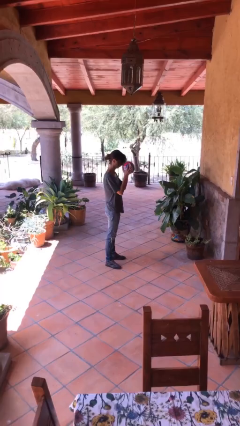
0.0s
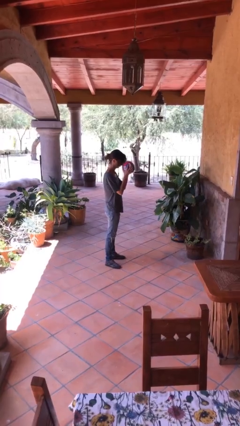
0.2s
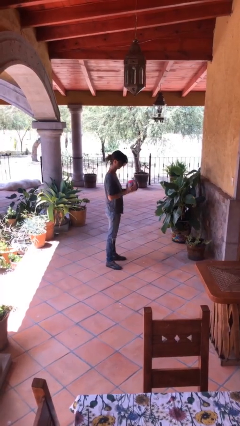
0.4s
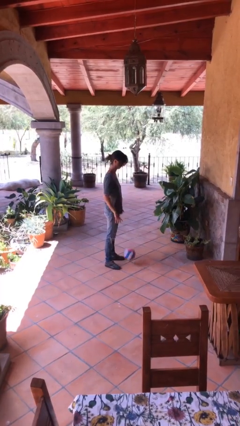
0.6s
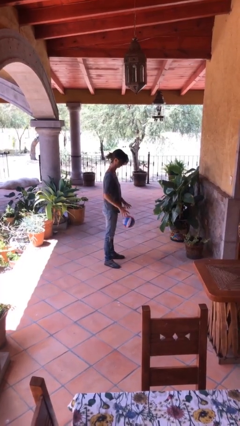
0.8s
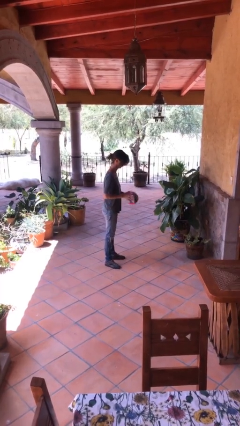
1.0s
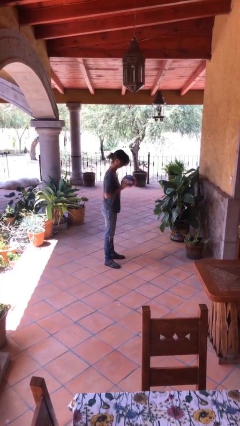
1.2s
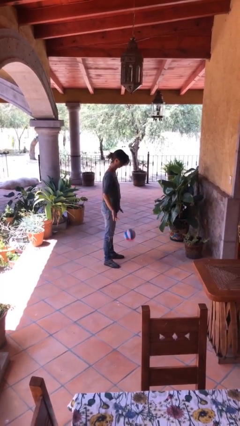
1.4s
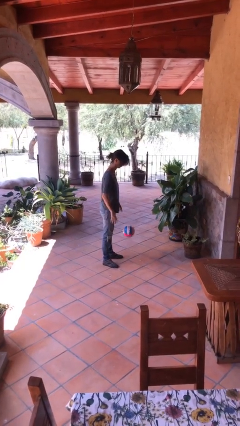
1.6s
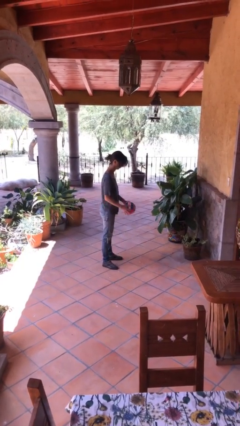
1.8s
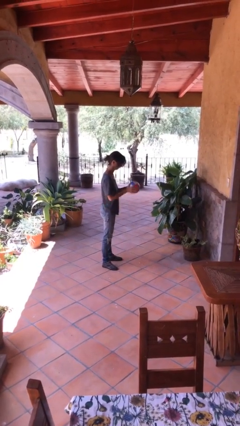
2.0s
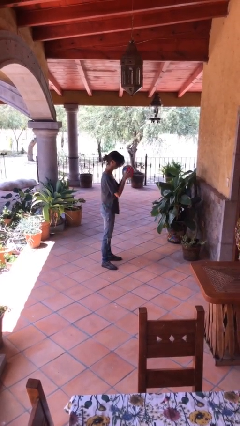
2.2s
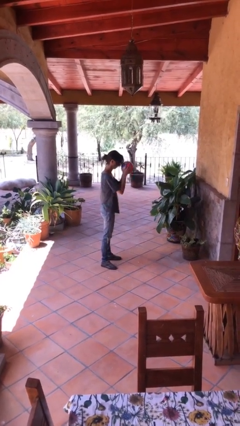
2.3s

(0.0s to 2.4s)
person bounces ball on floor

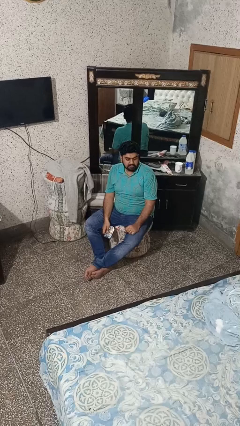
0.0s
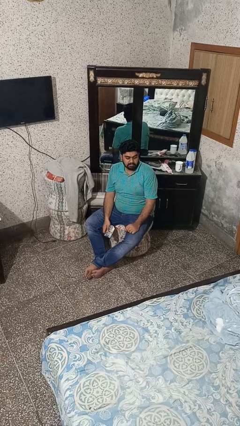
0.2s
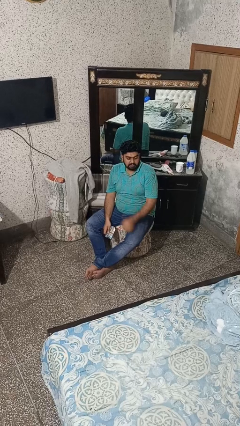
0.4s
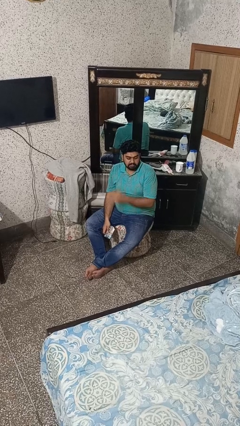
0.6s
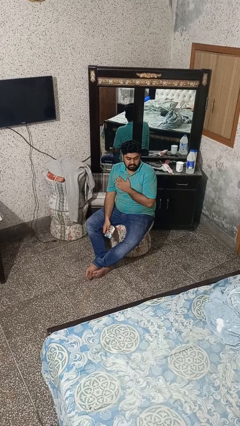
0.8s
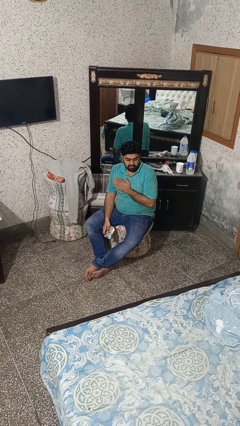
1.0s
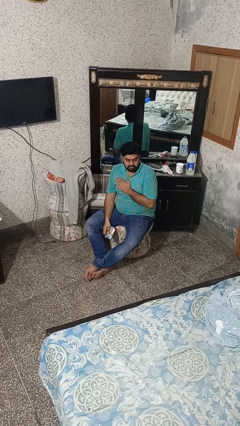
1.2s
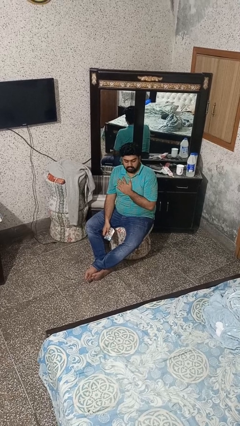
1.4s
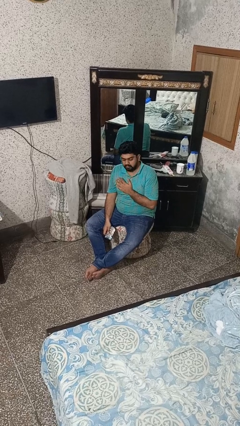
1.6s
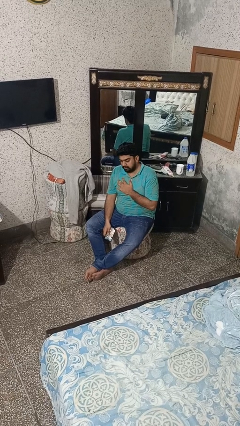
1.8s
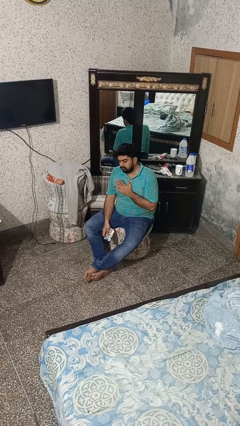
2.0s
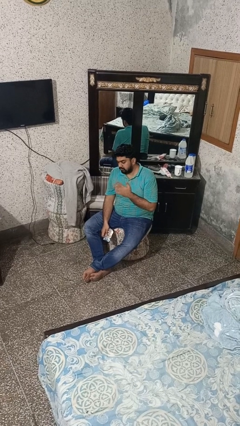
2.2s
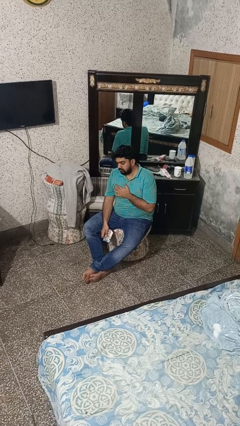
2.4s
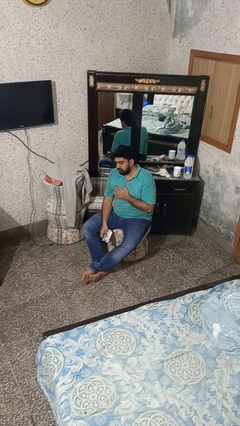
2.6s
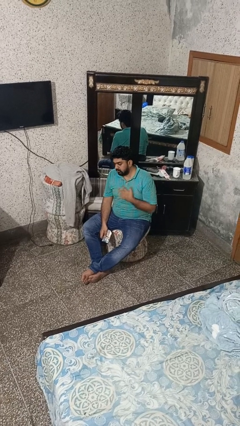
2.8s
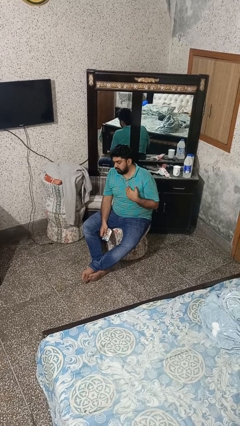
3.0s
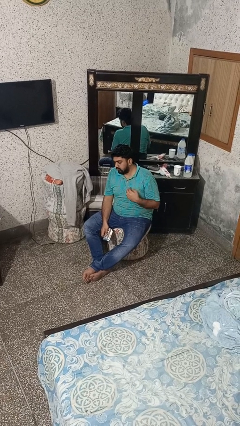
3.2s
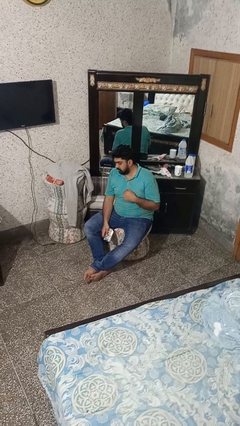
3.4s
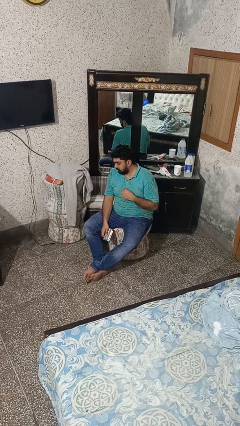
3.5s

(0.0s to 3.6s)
person drums on chest

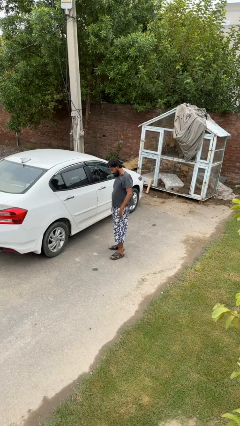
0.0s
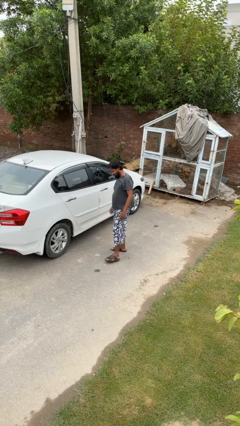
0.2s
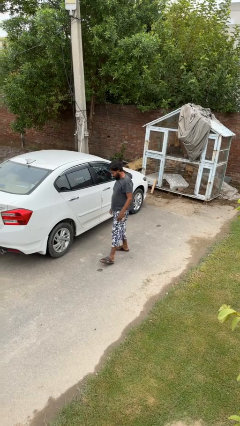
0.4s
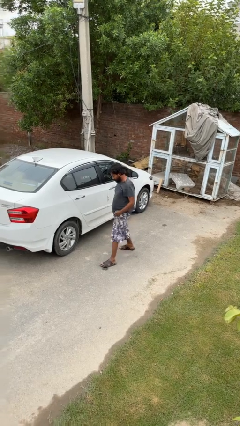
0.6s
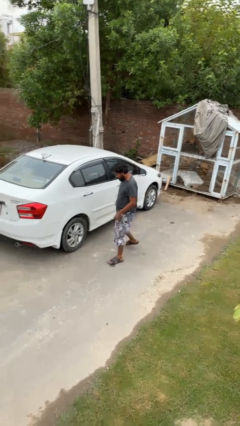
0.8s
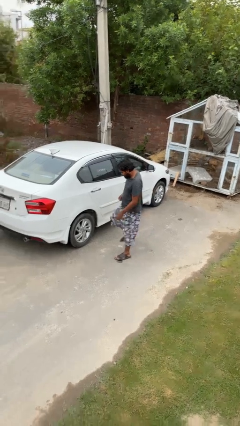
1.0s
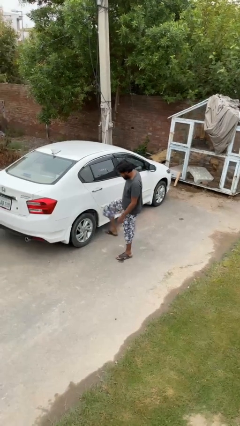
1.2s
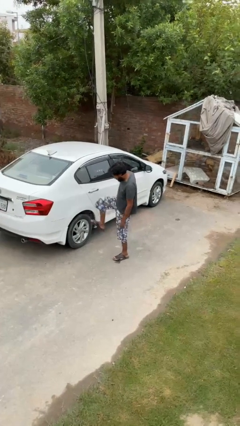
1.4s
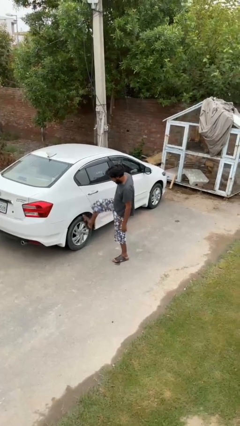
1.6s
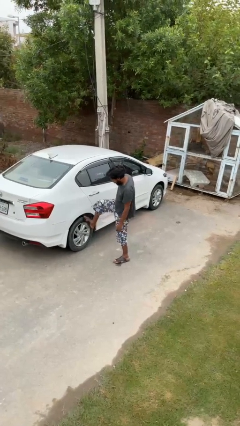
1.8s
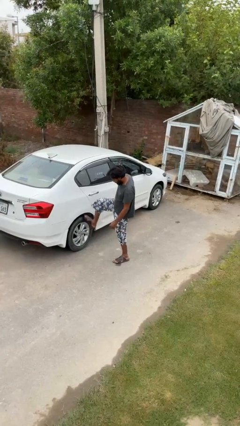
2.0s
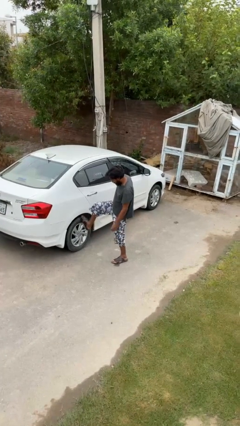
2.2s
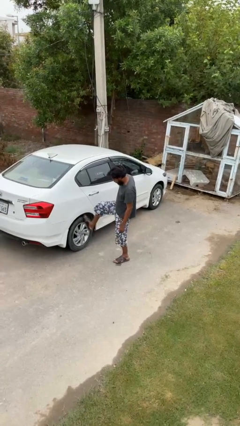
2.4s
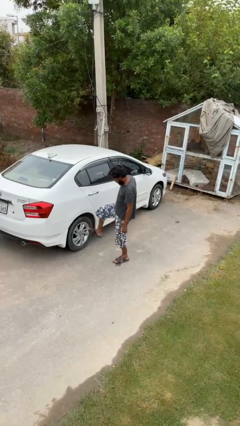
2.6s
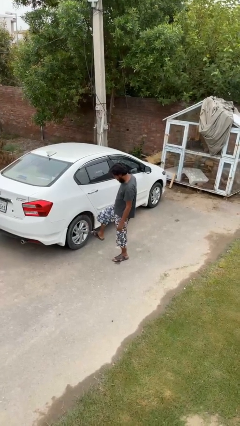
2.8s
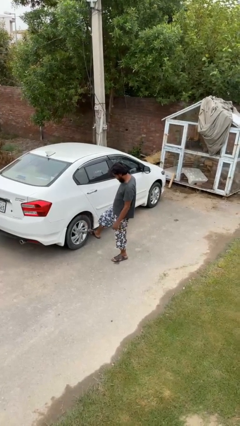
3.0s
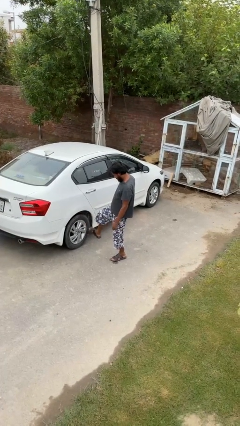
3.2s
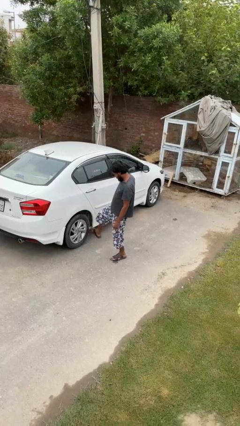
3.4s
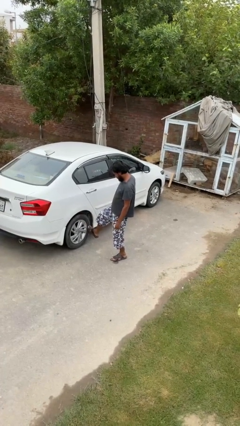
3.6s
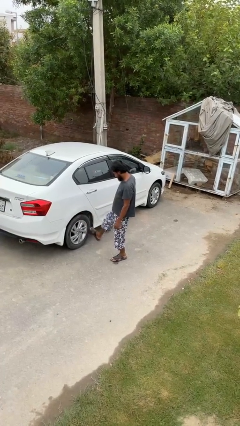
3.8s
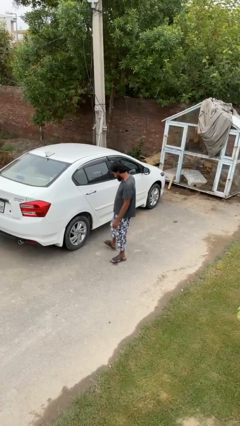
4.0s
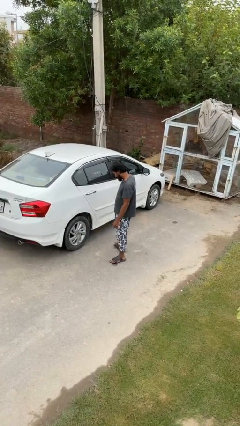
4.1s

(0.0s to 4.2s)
person kicks car tires

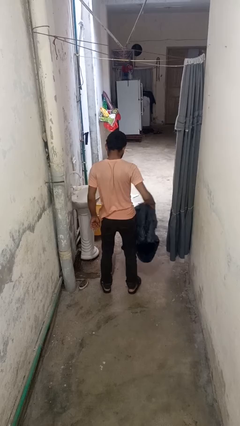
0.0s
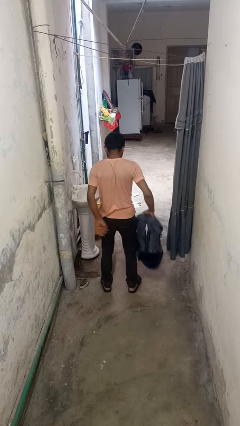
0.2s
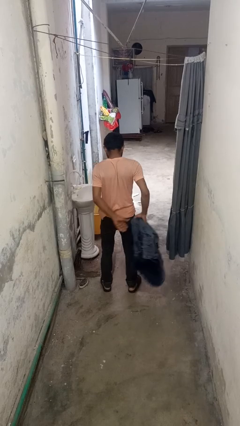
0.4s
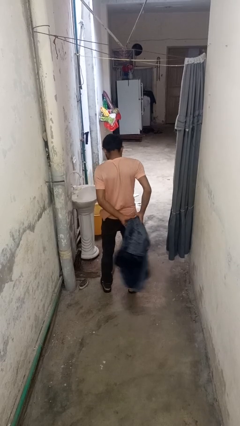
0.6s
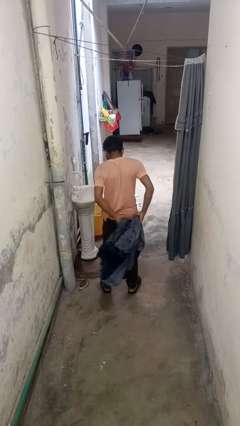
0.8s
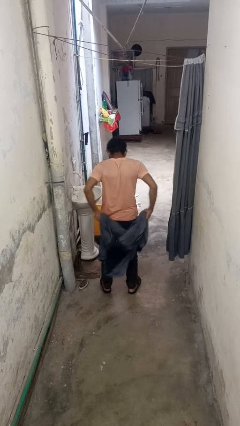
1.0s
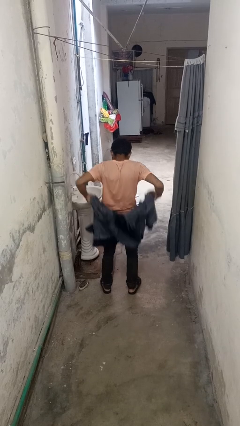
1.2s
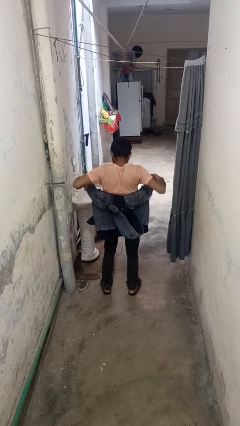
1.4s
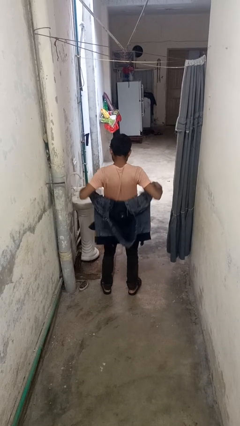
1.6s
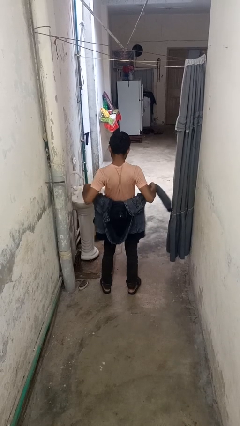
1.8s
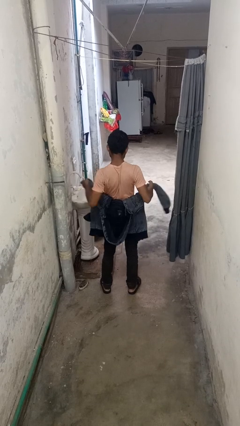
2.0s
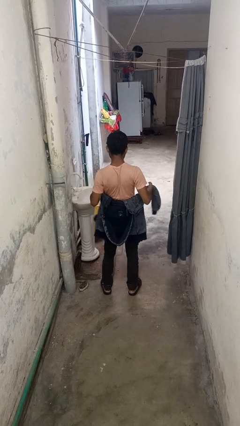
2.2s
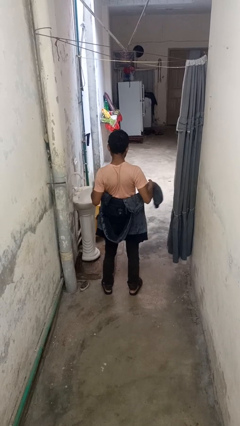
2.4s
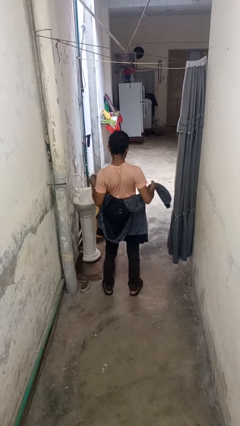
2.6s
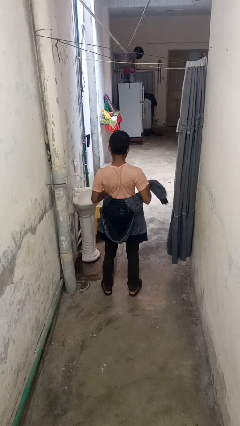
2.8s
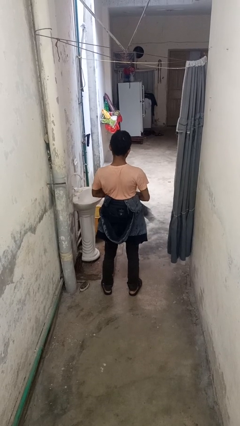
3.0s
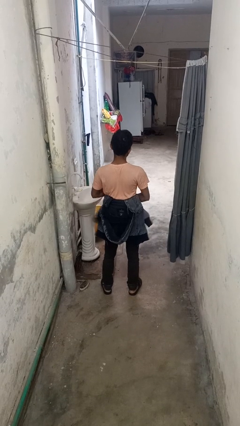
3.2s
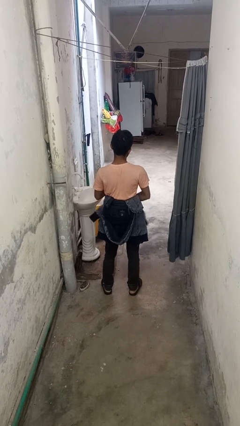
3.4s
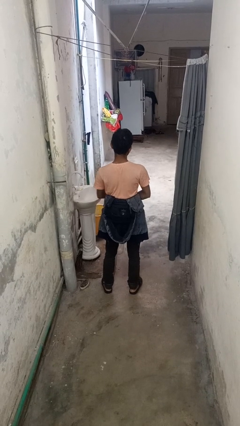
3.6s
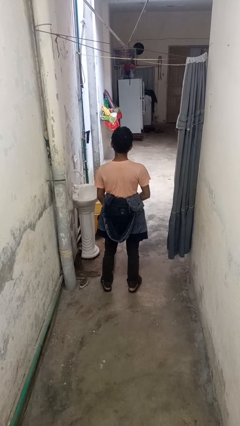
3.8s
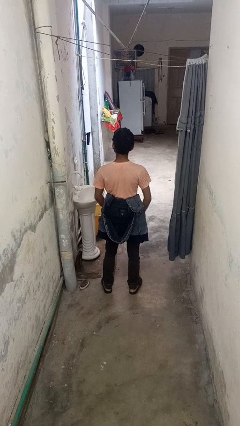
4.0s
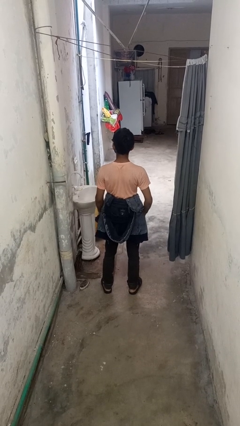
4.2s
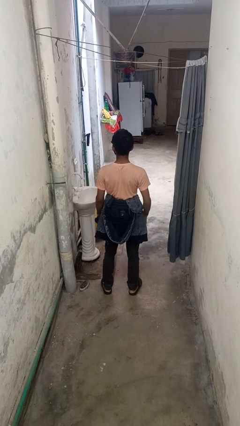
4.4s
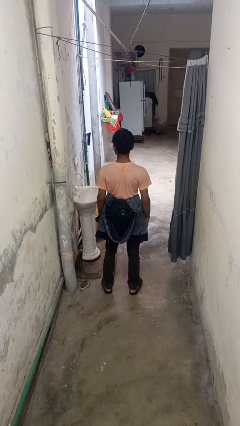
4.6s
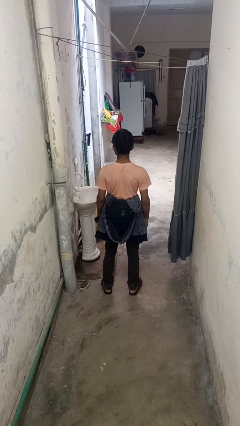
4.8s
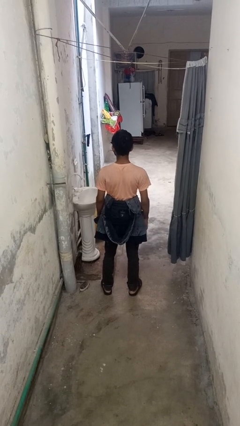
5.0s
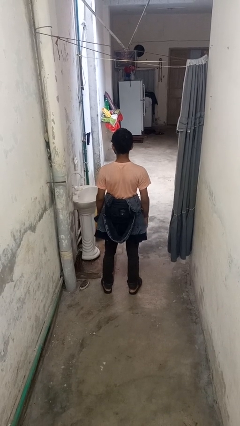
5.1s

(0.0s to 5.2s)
person ties jacket around waist

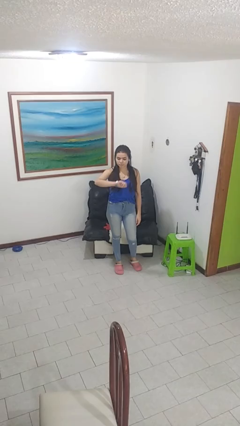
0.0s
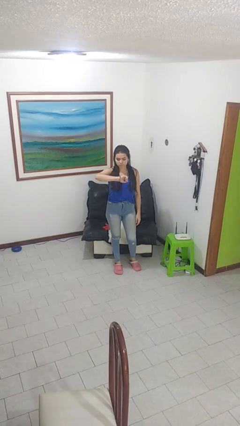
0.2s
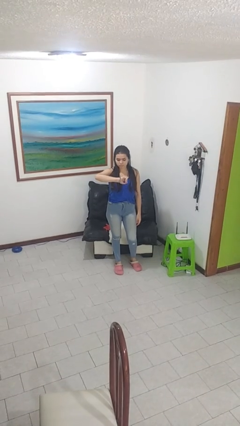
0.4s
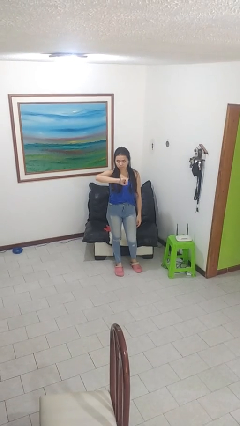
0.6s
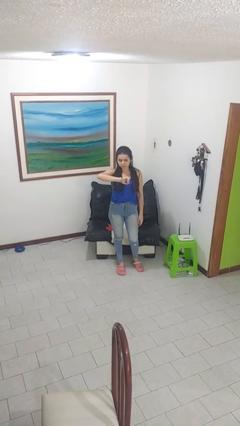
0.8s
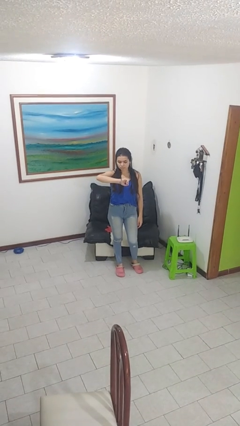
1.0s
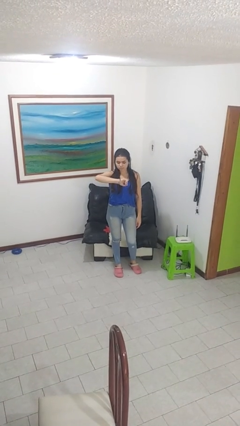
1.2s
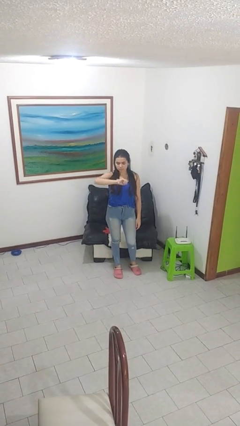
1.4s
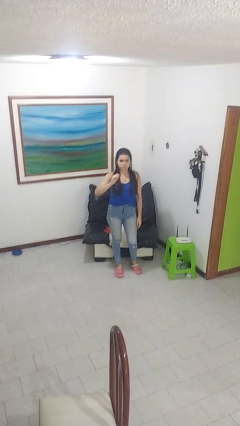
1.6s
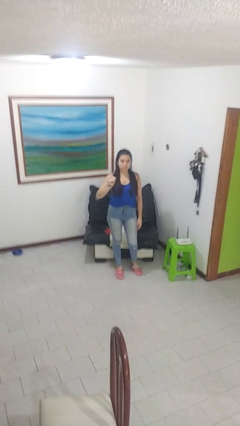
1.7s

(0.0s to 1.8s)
person looks at wristwatch

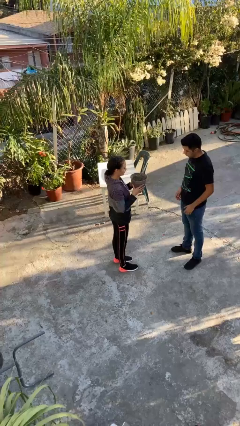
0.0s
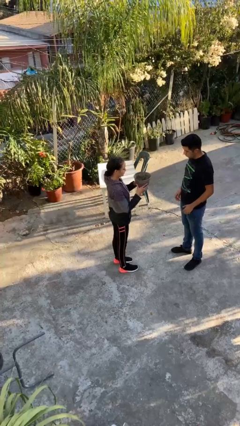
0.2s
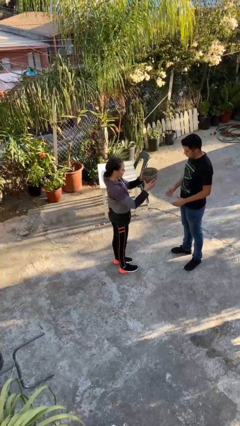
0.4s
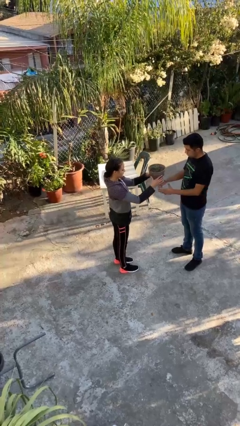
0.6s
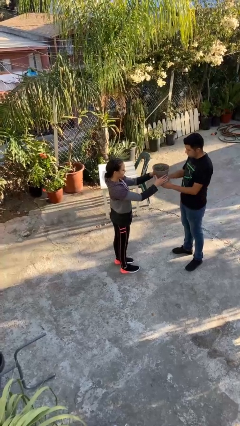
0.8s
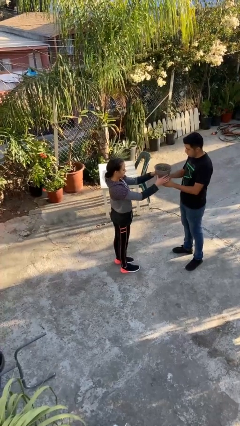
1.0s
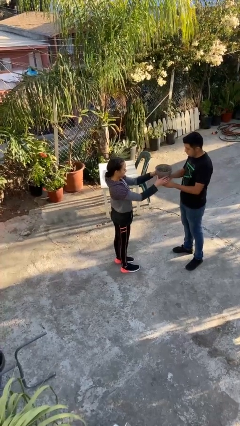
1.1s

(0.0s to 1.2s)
person transfers object to person
